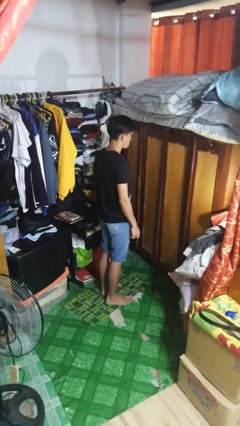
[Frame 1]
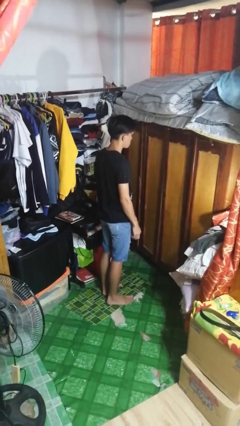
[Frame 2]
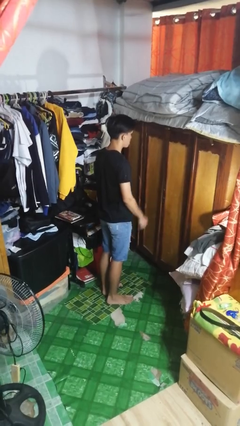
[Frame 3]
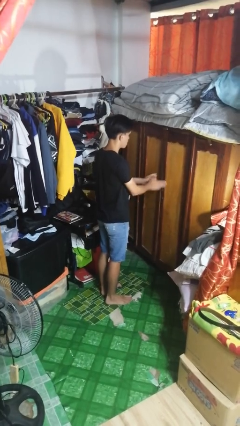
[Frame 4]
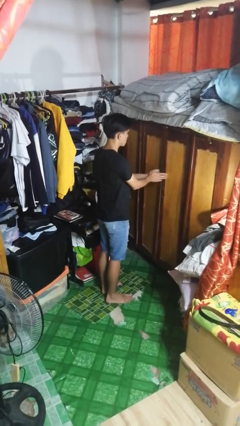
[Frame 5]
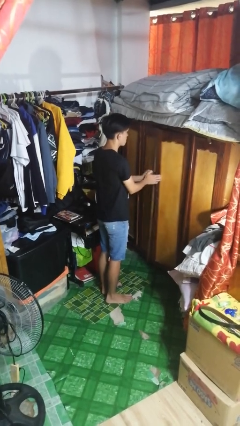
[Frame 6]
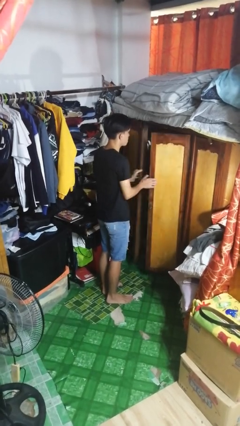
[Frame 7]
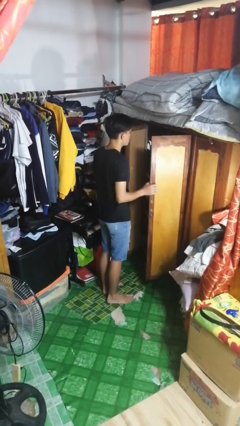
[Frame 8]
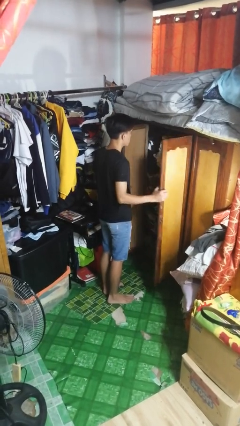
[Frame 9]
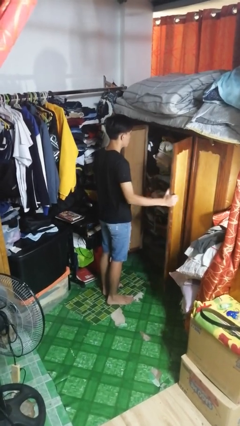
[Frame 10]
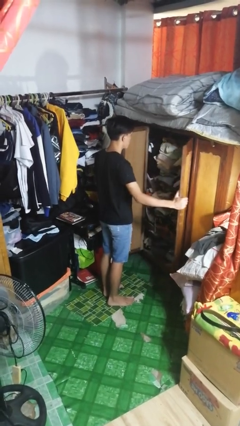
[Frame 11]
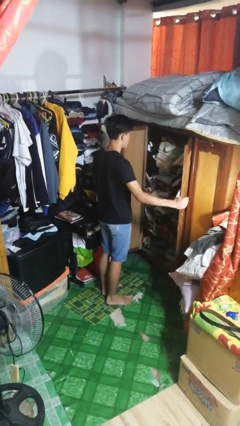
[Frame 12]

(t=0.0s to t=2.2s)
person opens closet door

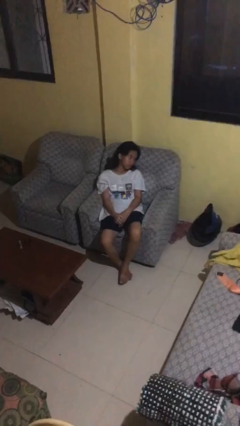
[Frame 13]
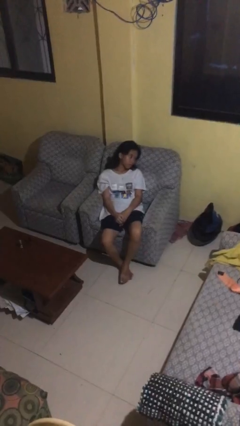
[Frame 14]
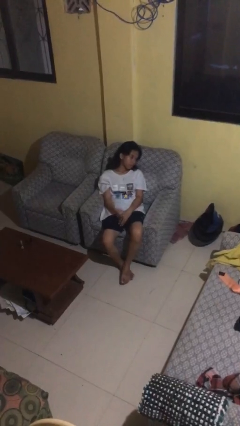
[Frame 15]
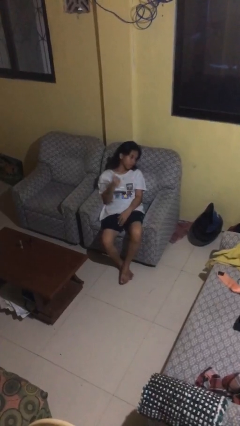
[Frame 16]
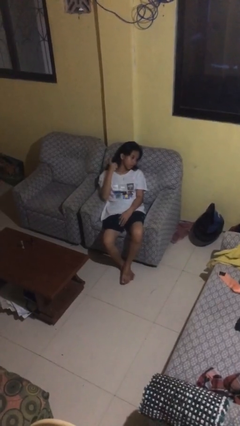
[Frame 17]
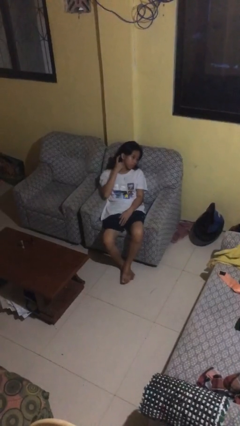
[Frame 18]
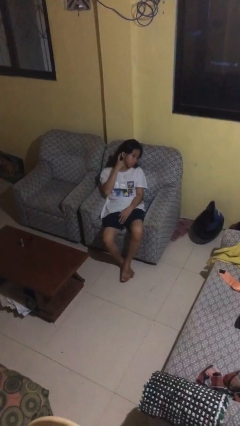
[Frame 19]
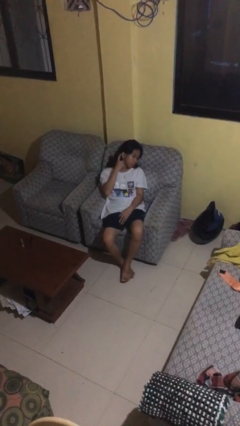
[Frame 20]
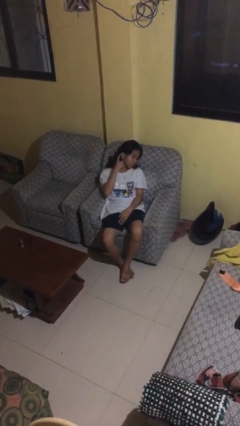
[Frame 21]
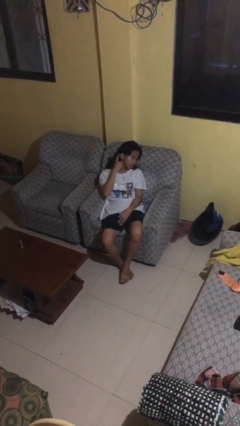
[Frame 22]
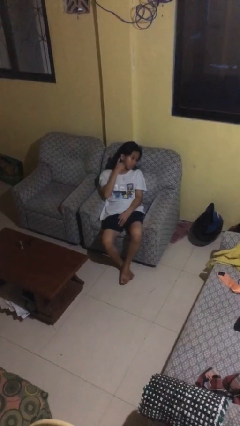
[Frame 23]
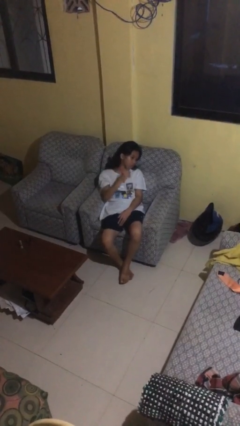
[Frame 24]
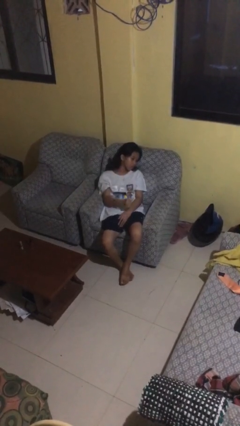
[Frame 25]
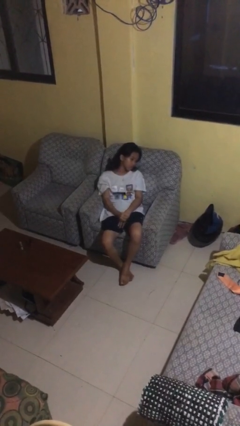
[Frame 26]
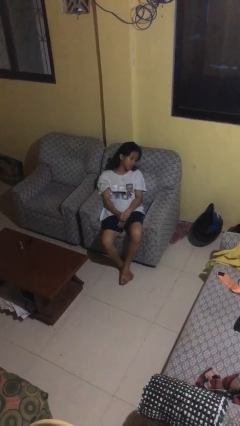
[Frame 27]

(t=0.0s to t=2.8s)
person gestures listen closely

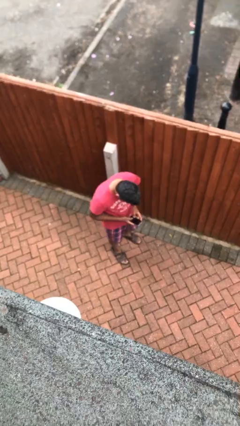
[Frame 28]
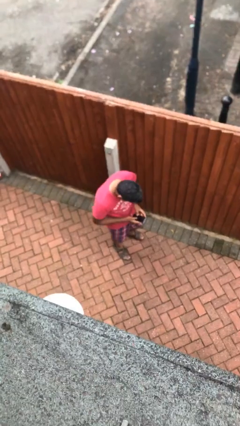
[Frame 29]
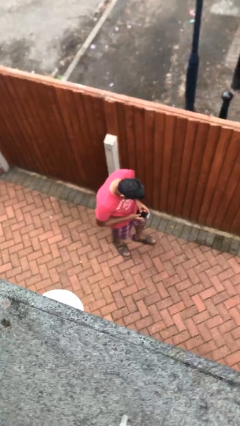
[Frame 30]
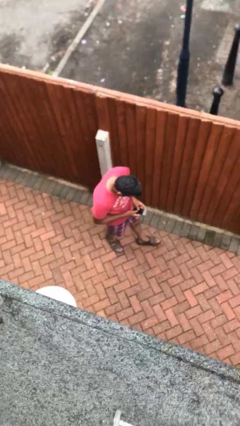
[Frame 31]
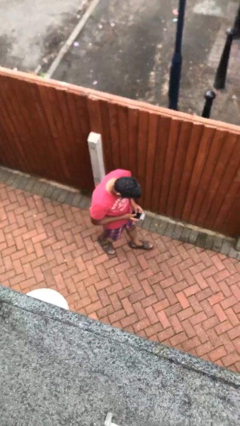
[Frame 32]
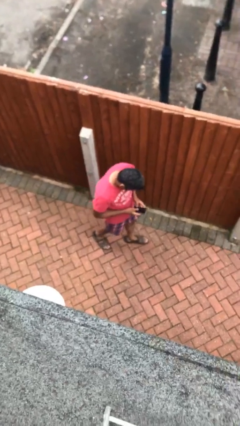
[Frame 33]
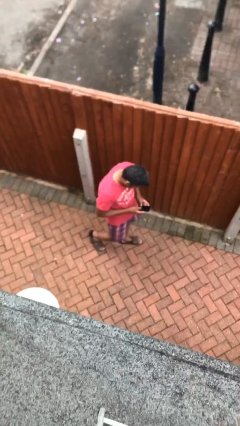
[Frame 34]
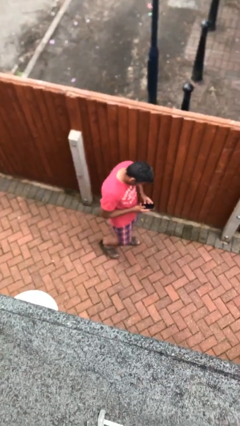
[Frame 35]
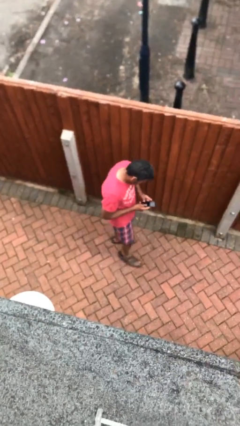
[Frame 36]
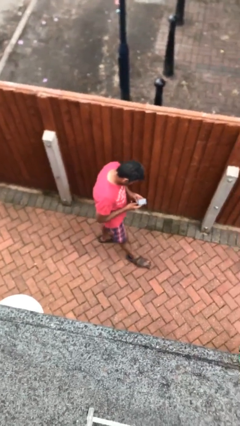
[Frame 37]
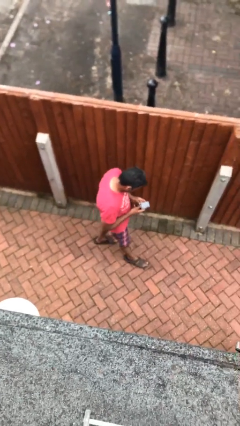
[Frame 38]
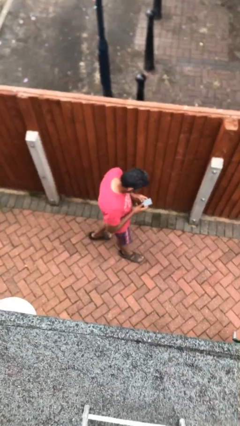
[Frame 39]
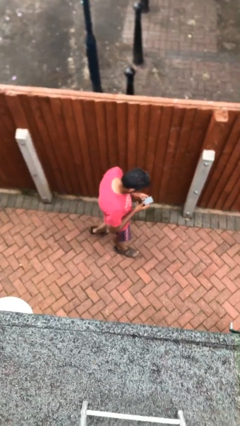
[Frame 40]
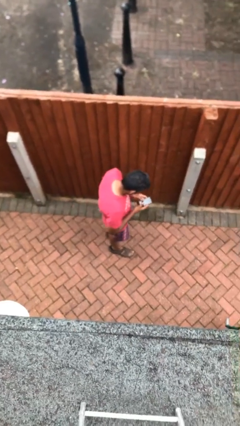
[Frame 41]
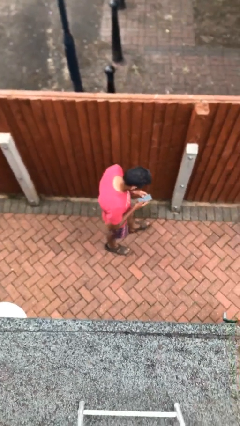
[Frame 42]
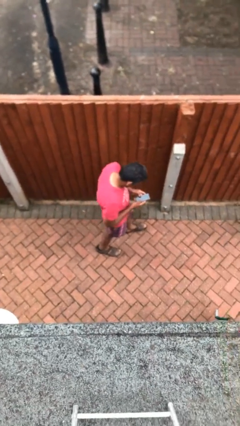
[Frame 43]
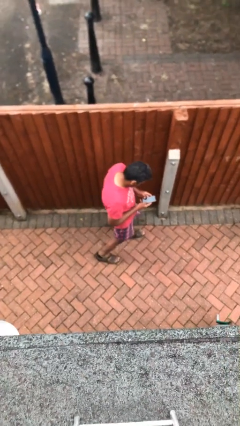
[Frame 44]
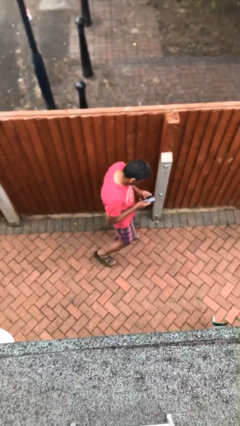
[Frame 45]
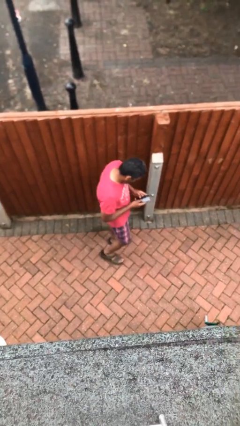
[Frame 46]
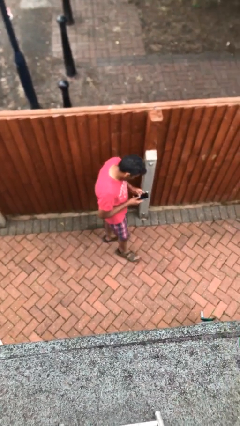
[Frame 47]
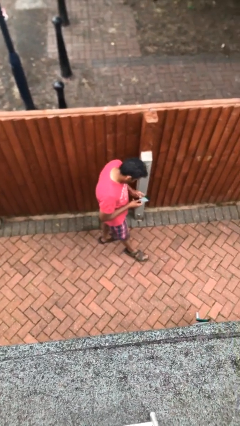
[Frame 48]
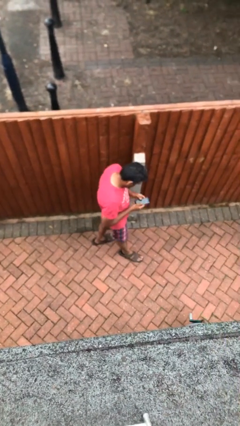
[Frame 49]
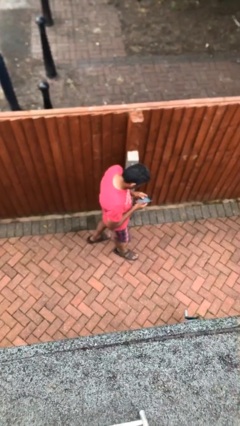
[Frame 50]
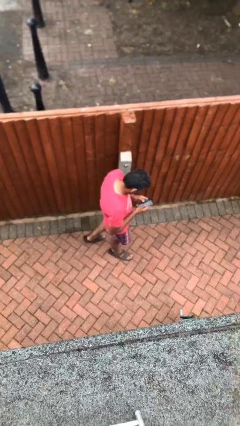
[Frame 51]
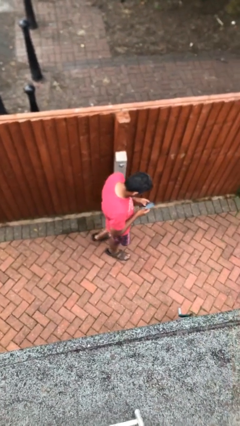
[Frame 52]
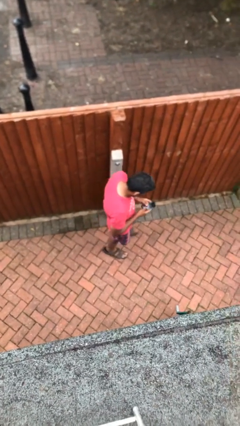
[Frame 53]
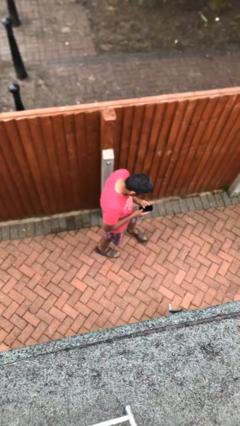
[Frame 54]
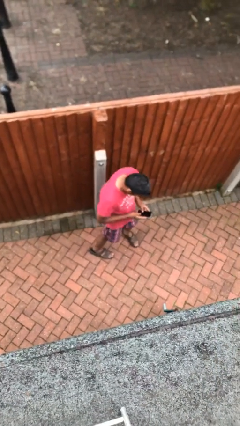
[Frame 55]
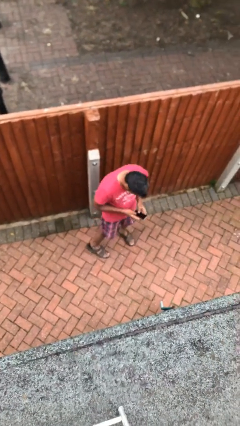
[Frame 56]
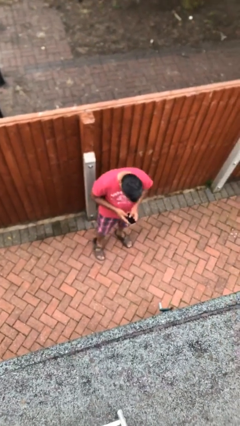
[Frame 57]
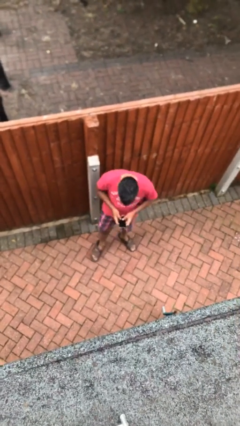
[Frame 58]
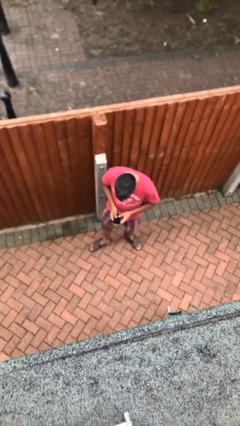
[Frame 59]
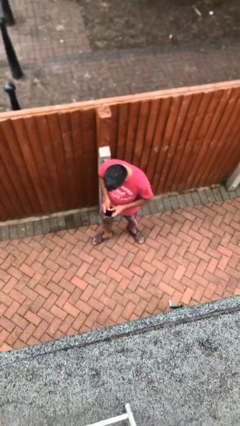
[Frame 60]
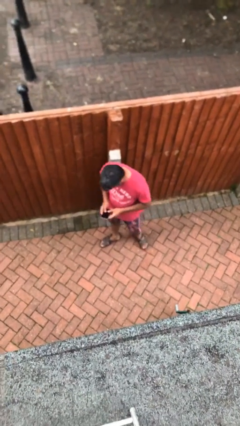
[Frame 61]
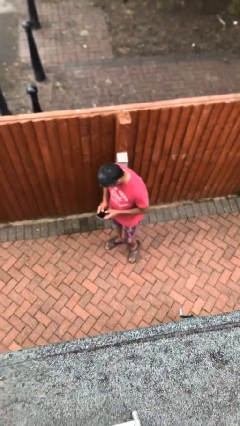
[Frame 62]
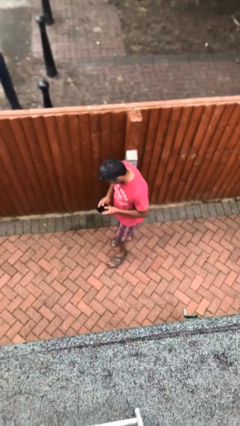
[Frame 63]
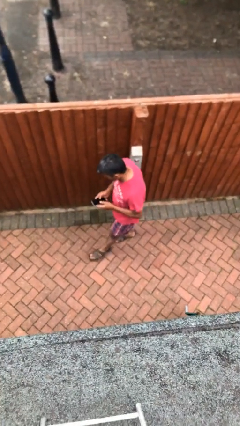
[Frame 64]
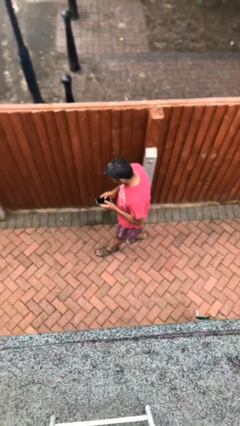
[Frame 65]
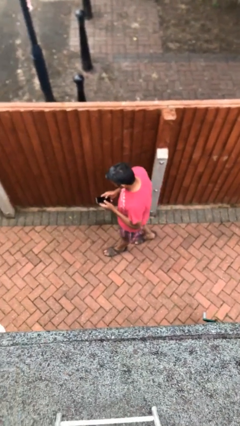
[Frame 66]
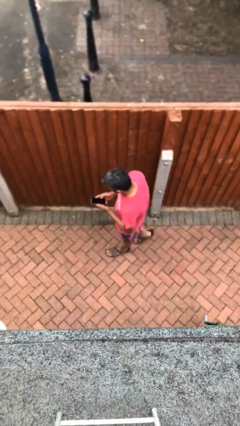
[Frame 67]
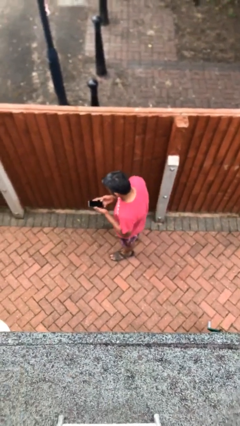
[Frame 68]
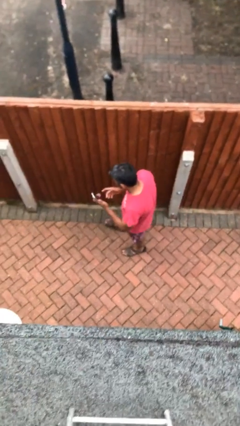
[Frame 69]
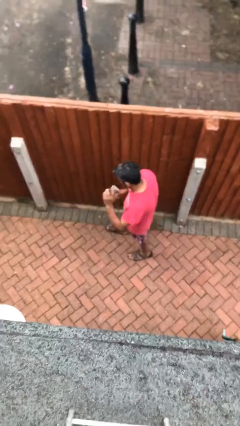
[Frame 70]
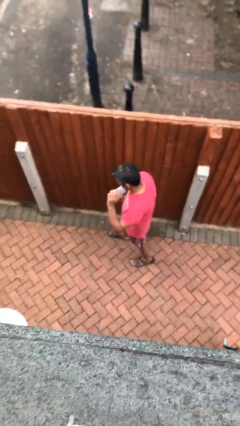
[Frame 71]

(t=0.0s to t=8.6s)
person texts on phone

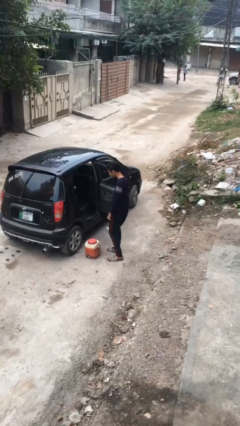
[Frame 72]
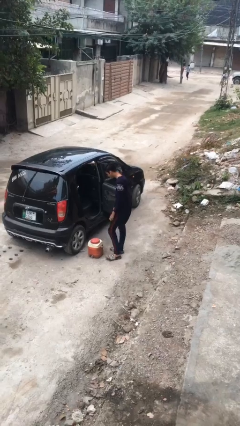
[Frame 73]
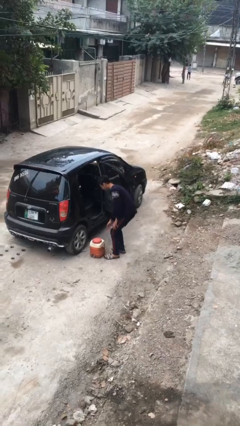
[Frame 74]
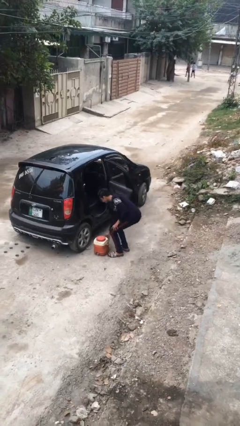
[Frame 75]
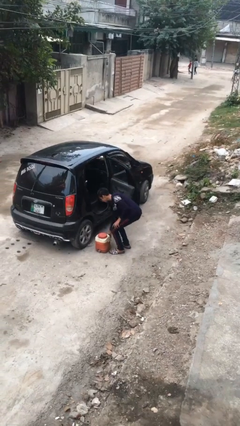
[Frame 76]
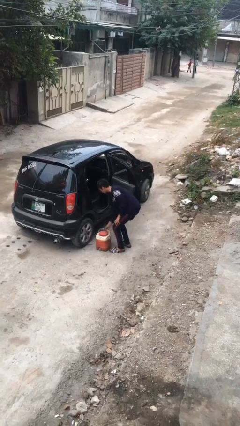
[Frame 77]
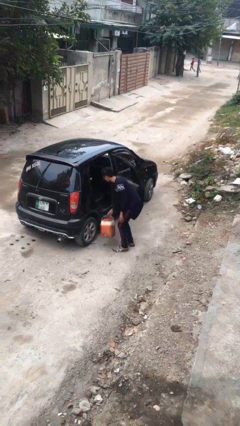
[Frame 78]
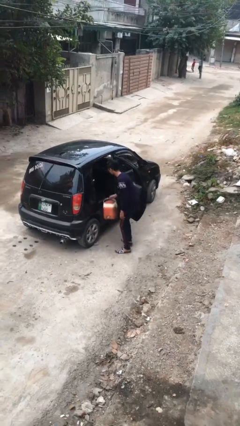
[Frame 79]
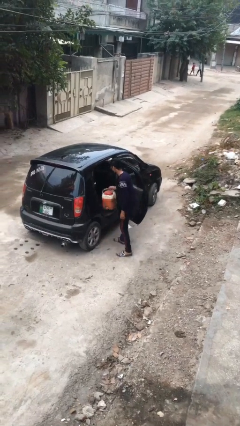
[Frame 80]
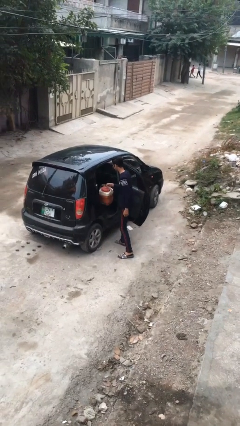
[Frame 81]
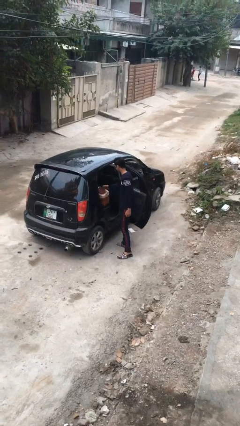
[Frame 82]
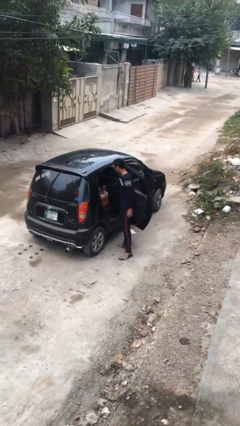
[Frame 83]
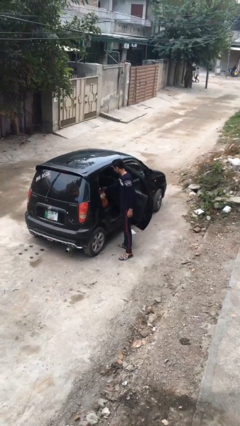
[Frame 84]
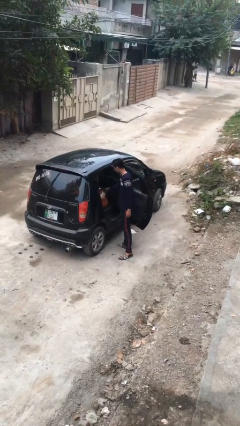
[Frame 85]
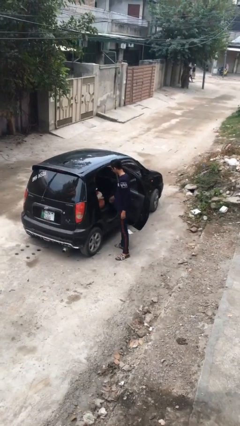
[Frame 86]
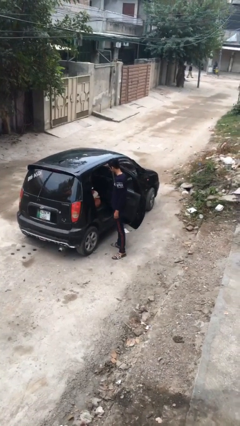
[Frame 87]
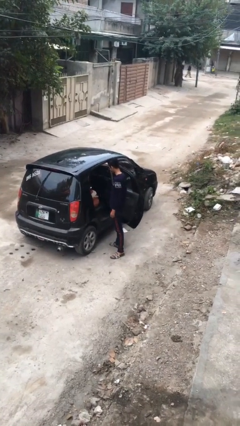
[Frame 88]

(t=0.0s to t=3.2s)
person loads car

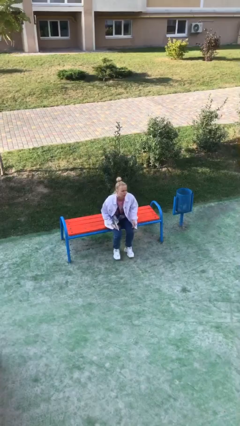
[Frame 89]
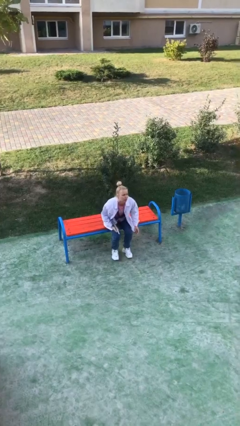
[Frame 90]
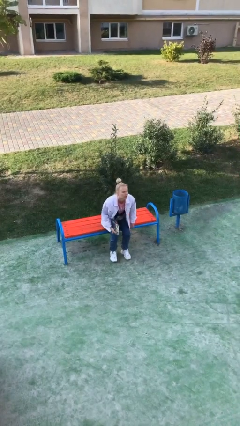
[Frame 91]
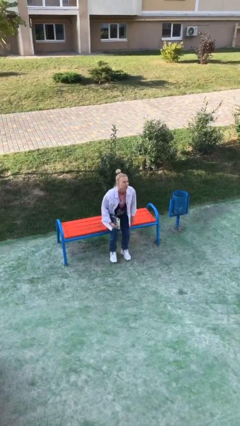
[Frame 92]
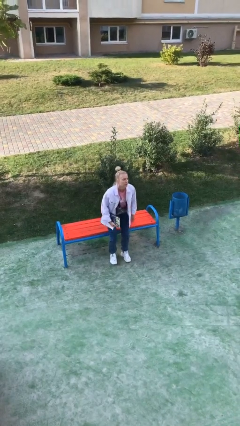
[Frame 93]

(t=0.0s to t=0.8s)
person stands up
